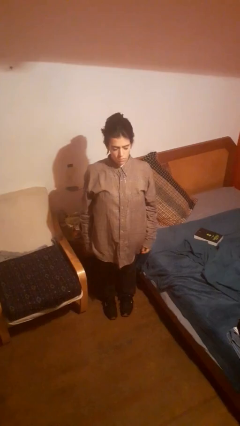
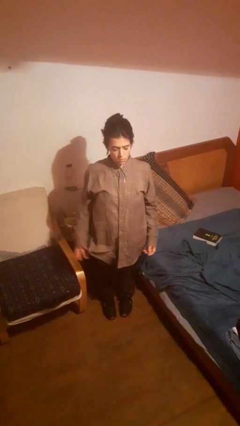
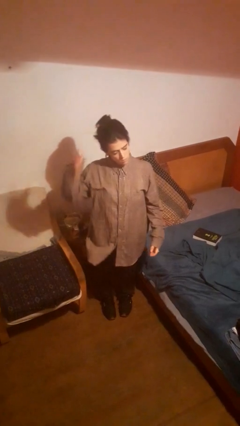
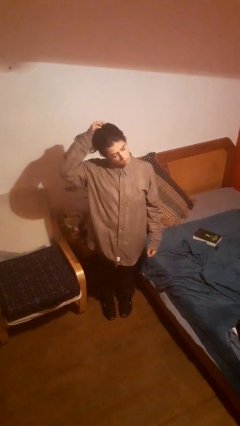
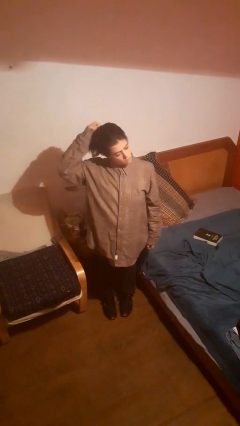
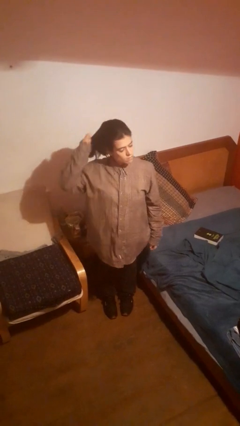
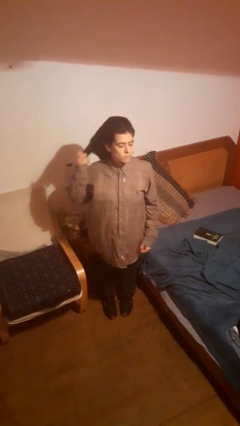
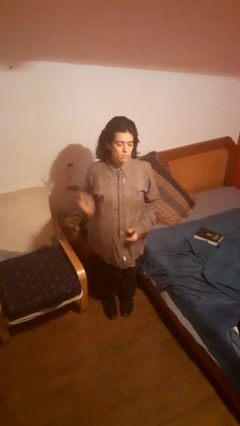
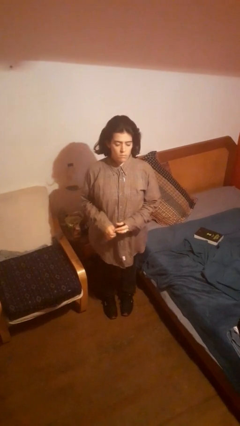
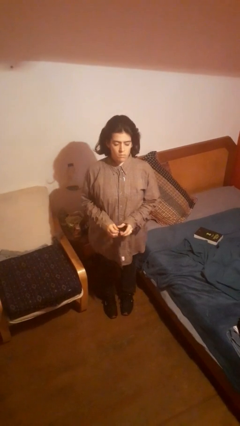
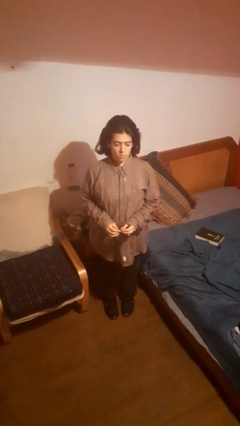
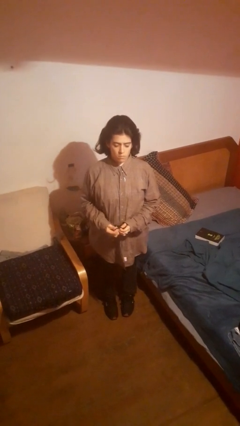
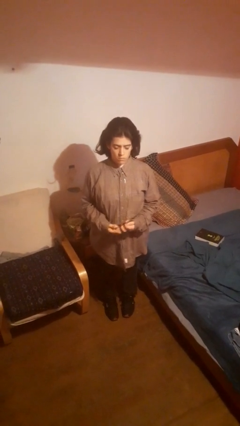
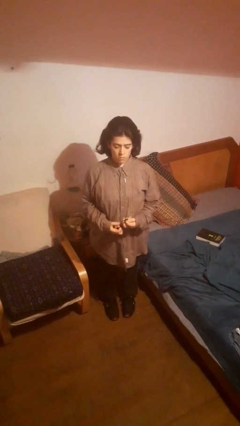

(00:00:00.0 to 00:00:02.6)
person takes off hairtie

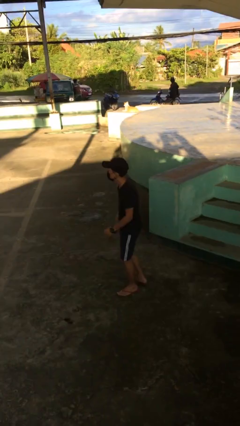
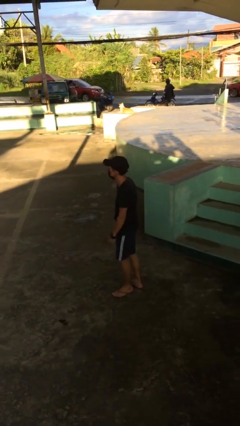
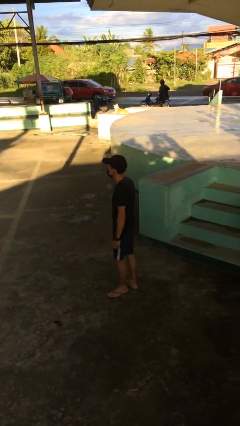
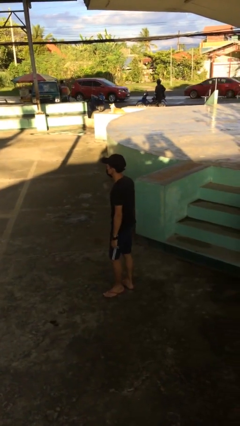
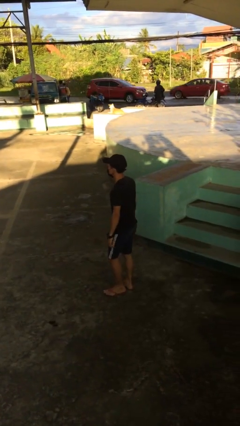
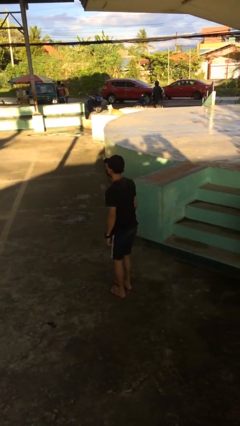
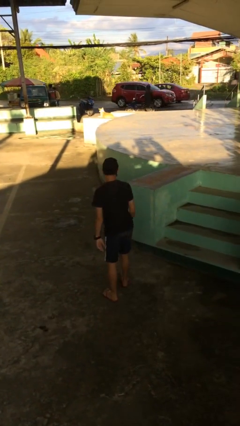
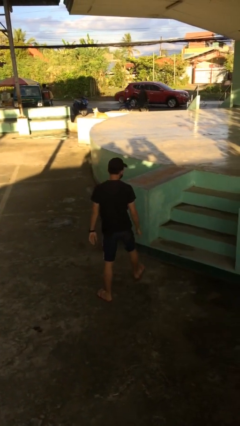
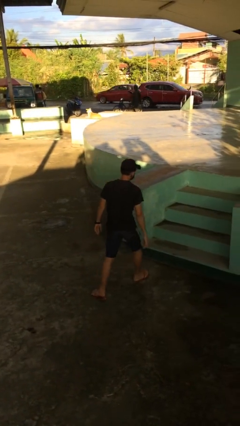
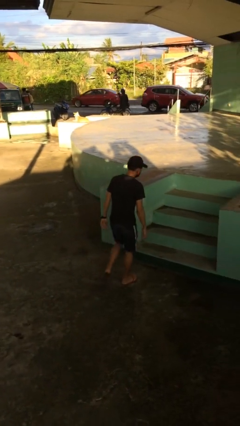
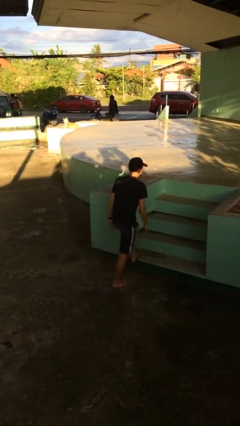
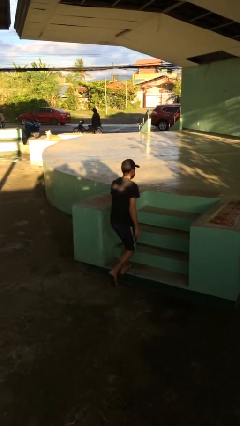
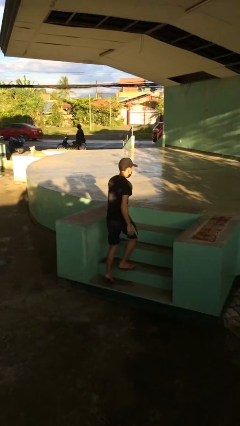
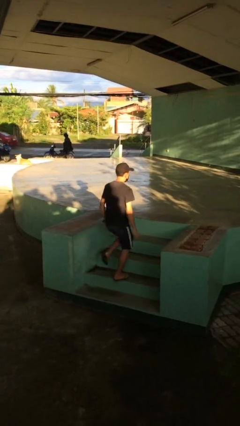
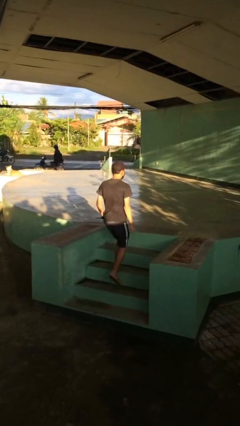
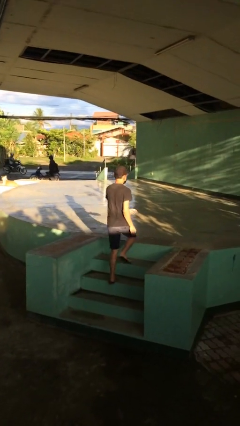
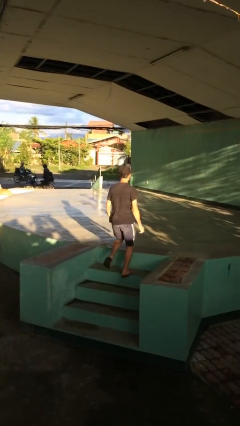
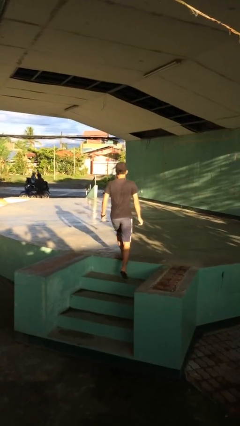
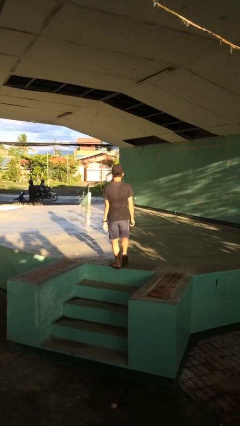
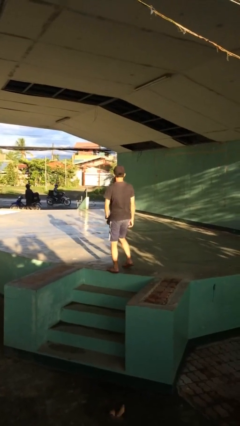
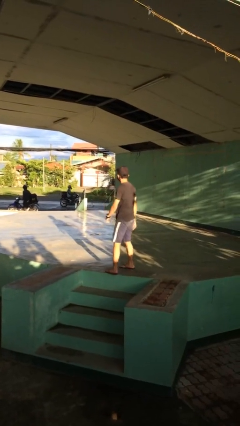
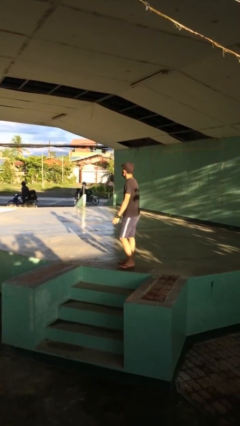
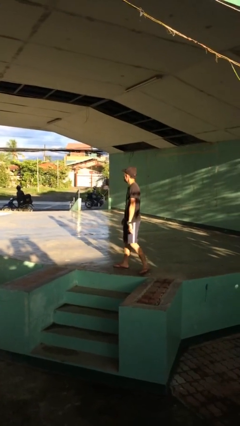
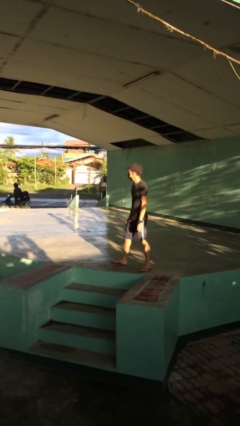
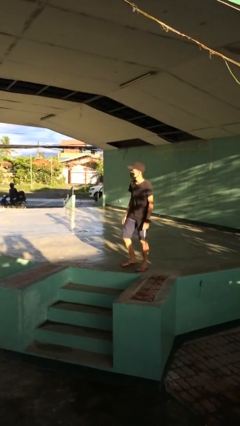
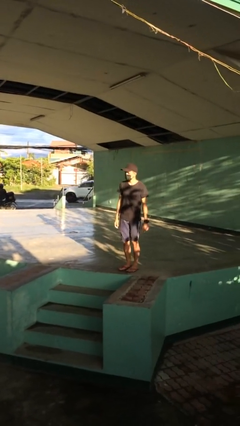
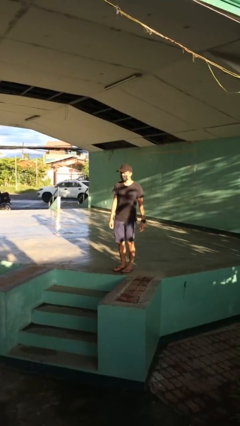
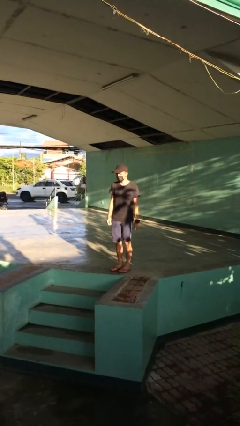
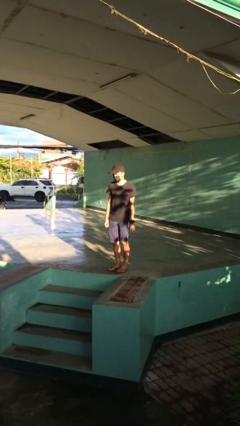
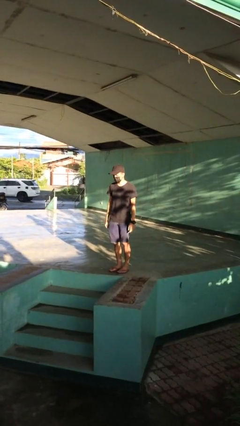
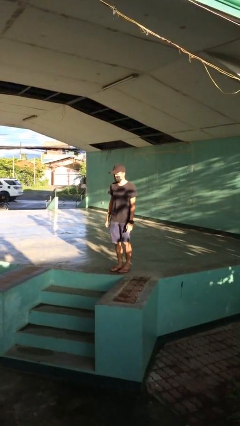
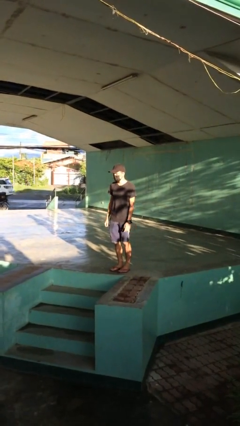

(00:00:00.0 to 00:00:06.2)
person climbs up stairs

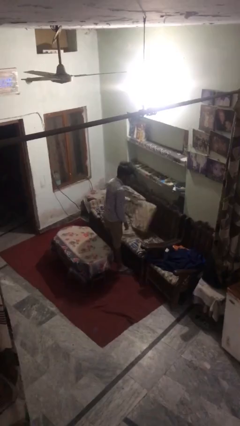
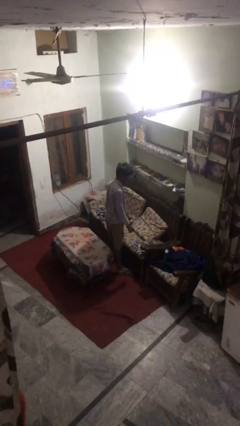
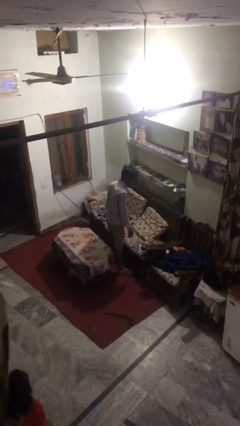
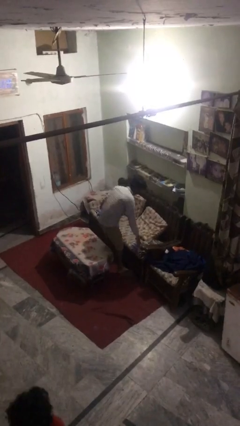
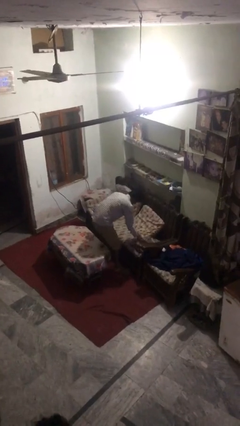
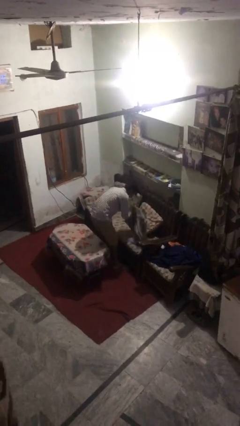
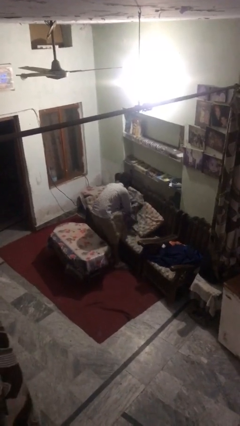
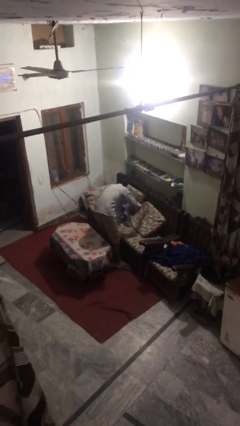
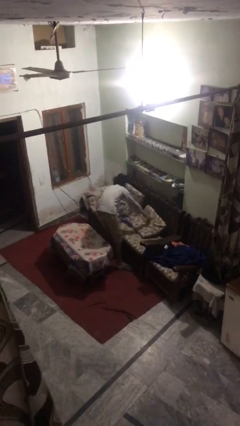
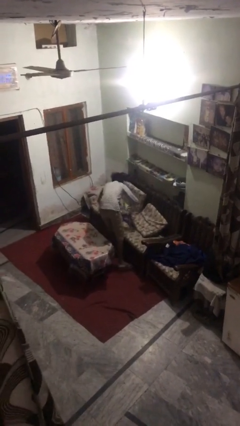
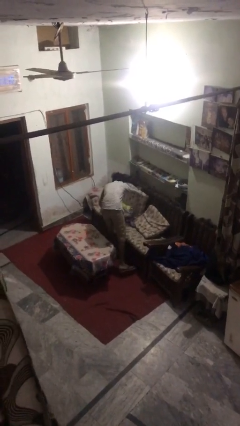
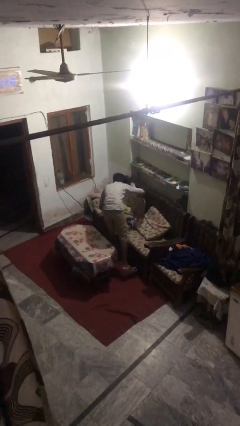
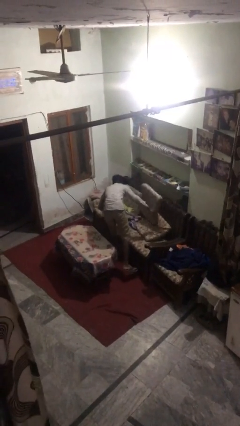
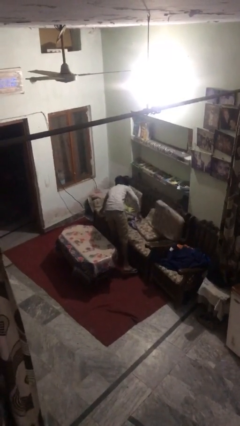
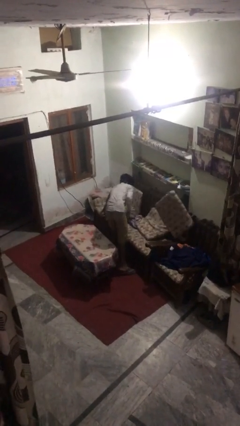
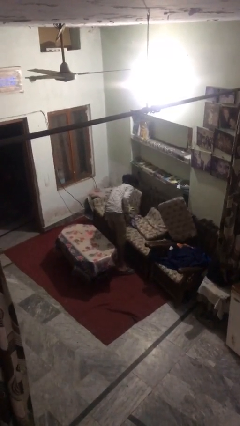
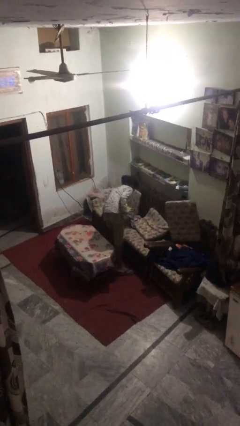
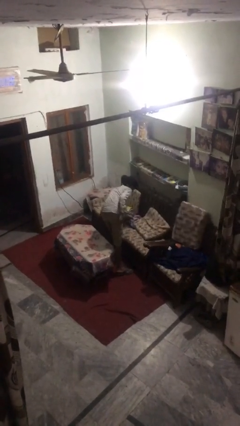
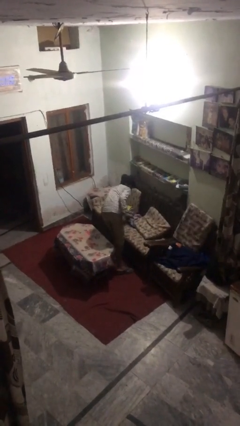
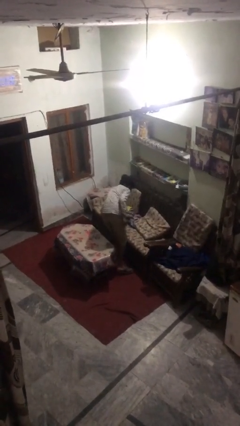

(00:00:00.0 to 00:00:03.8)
person searches in couch

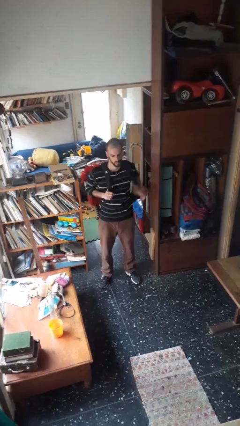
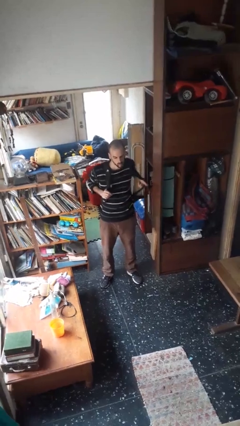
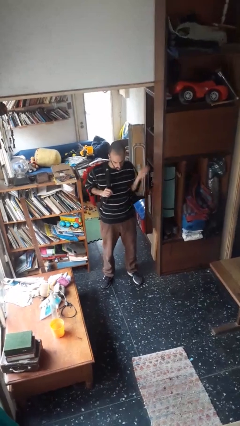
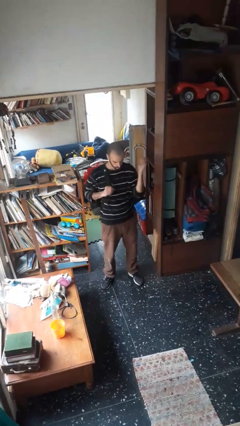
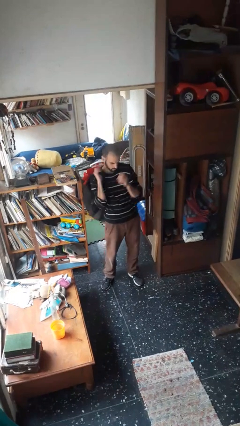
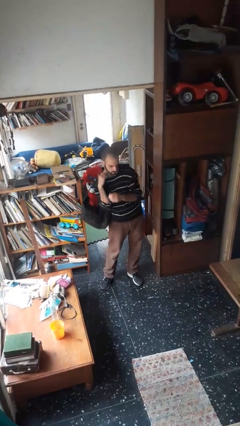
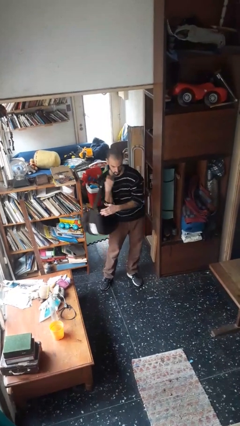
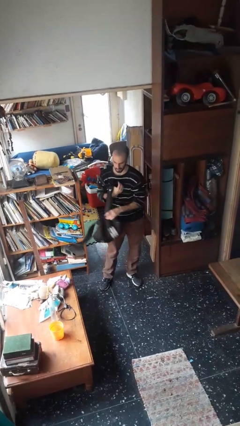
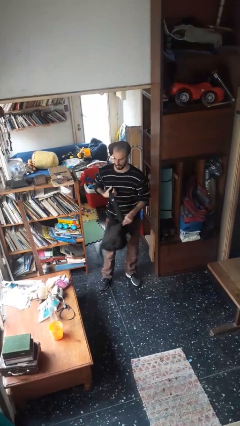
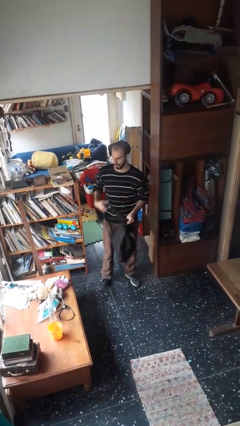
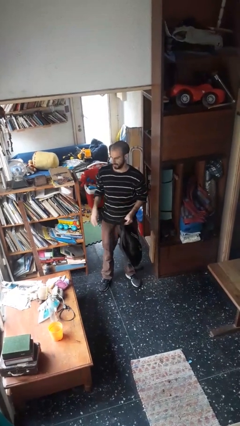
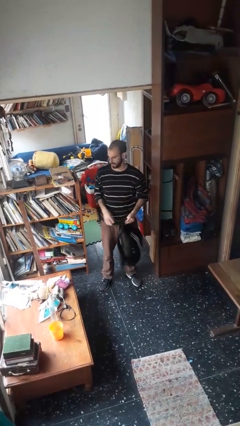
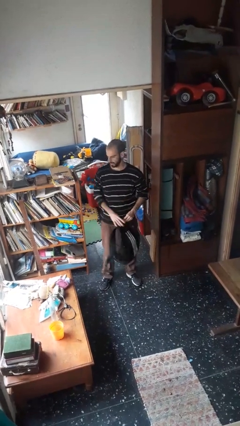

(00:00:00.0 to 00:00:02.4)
person takes off backpack

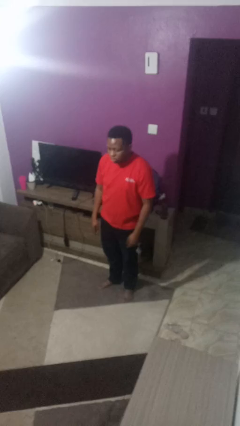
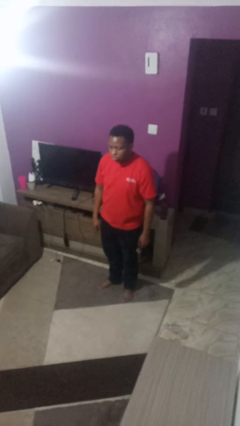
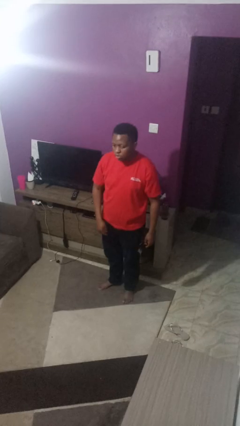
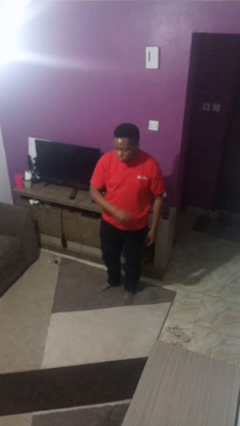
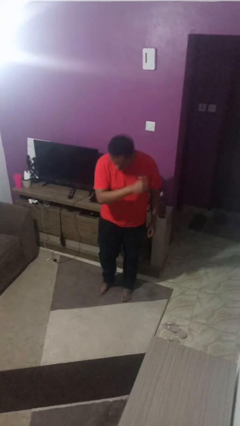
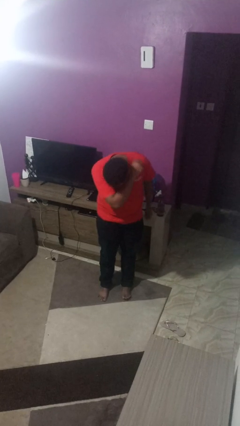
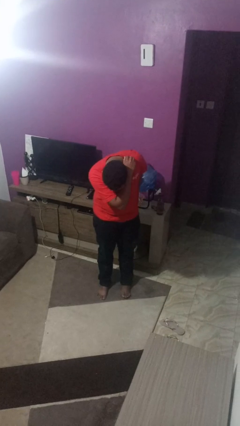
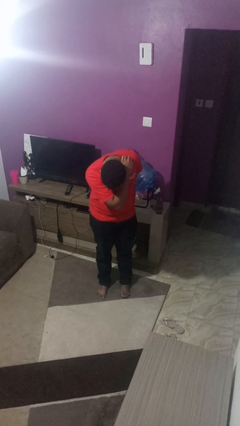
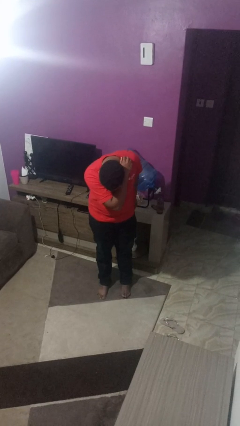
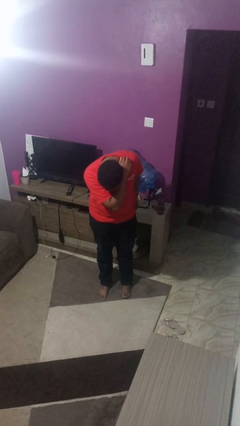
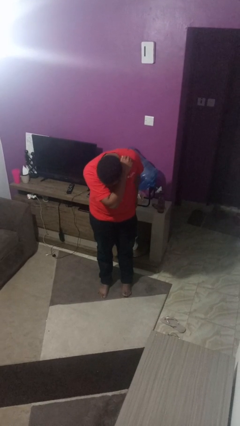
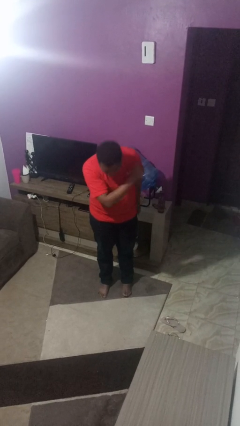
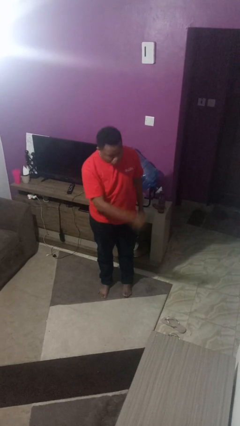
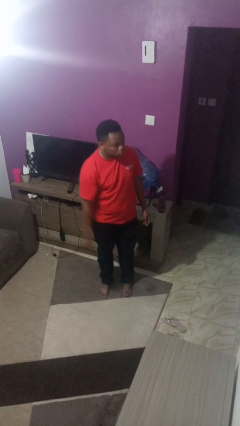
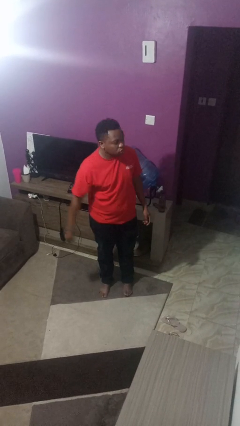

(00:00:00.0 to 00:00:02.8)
person sneezes into arm
